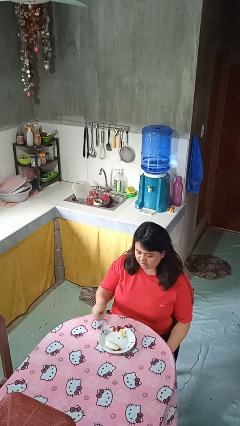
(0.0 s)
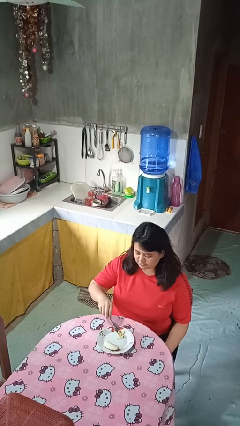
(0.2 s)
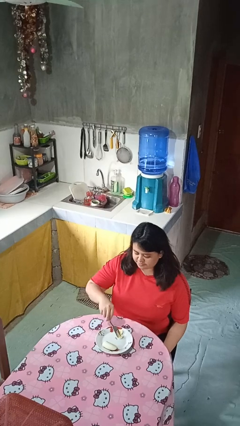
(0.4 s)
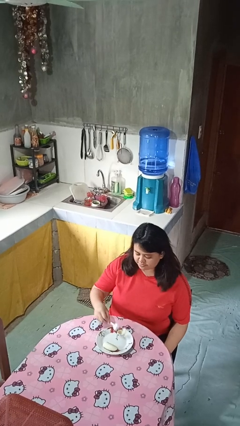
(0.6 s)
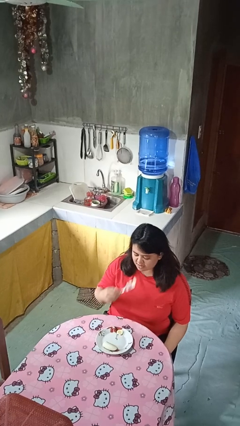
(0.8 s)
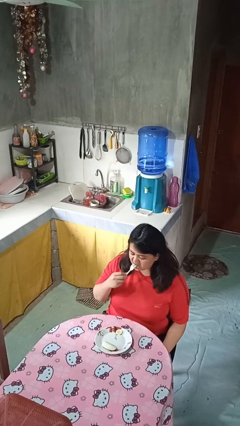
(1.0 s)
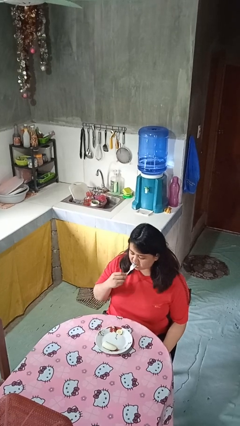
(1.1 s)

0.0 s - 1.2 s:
person eats with utensil

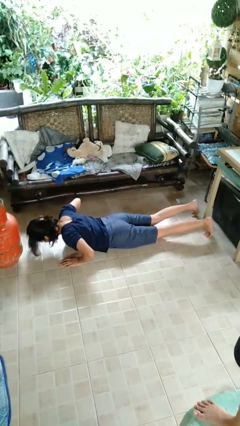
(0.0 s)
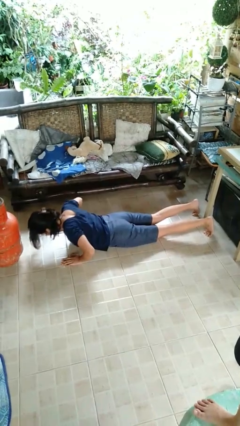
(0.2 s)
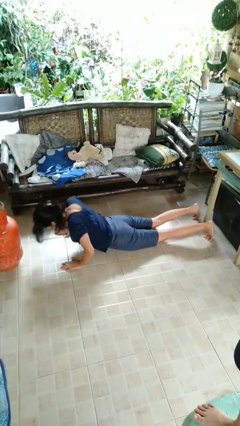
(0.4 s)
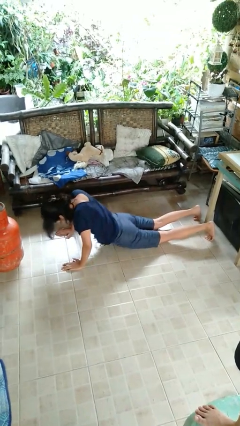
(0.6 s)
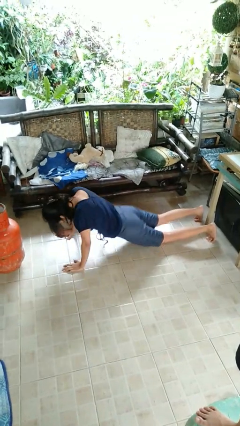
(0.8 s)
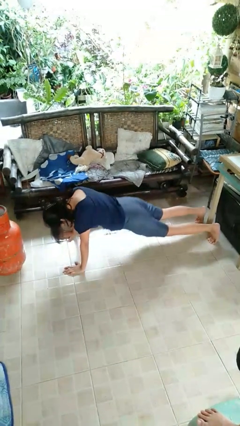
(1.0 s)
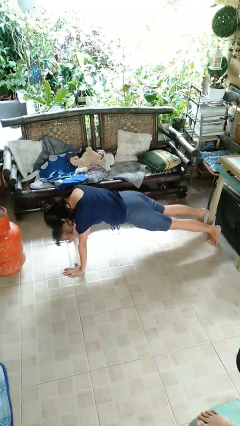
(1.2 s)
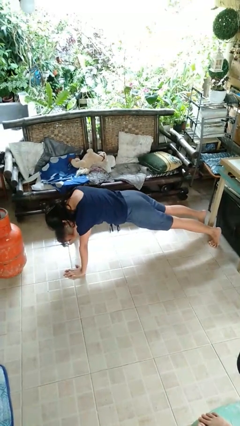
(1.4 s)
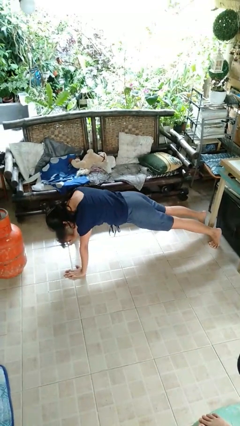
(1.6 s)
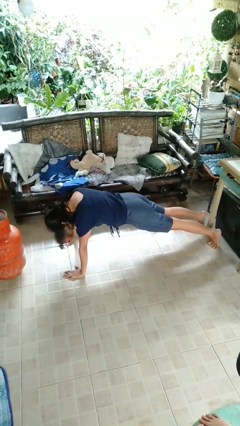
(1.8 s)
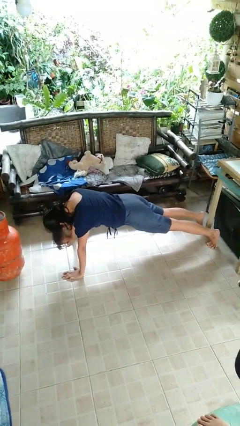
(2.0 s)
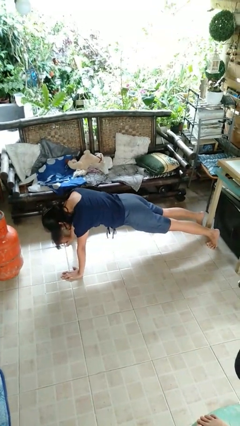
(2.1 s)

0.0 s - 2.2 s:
person exercises with pushup

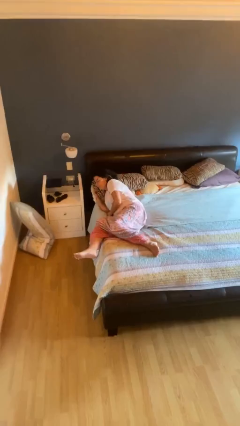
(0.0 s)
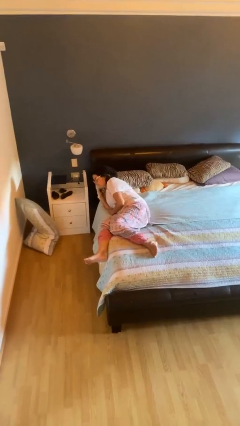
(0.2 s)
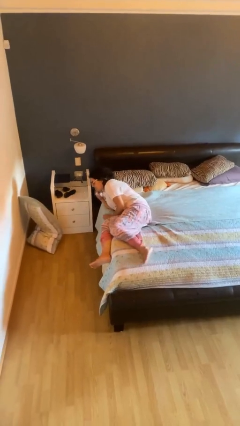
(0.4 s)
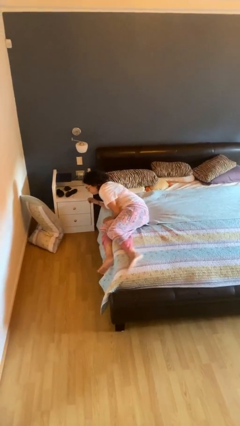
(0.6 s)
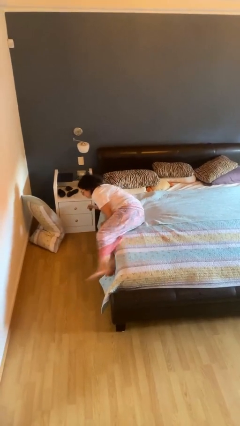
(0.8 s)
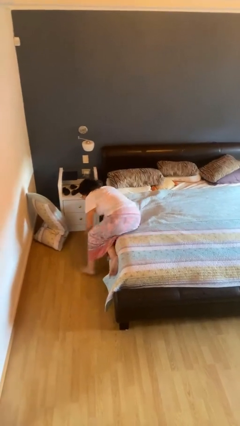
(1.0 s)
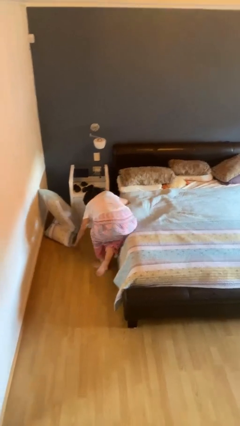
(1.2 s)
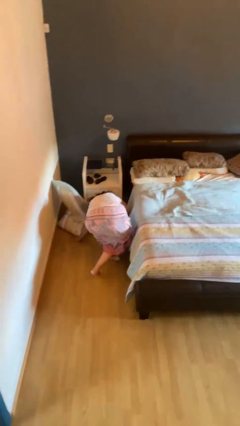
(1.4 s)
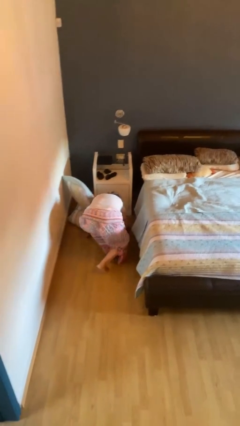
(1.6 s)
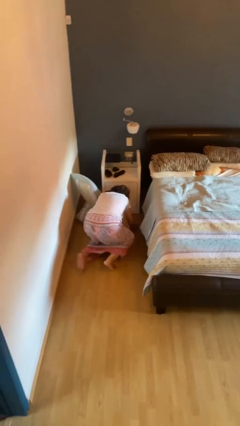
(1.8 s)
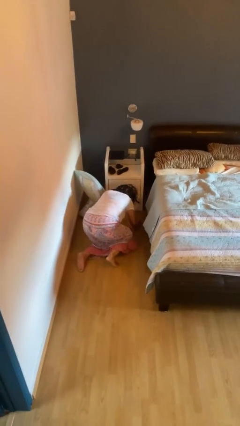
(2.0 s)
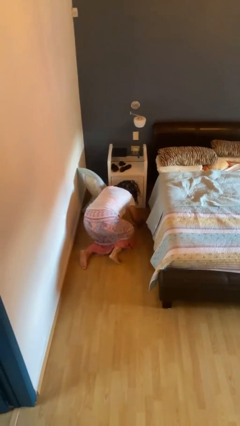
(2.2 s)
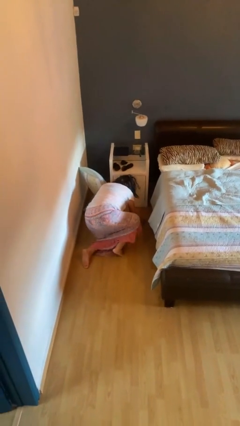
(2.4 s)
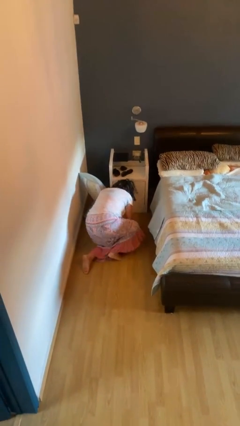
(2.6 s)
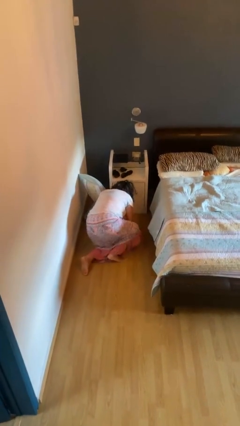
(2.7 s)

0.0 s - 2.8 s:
person falls from bed

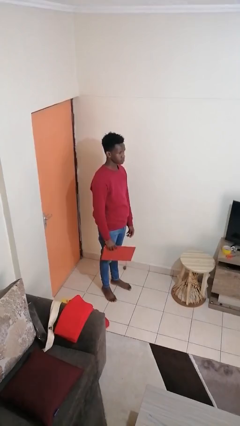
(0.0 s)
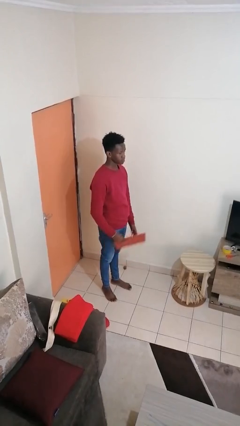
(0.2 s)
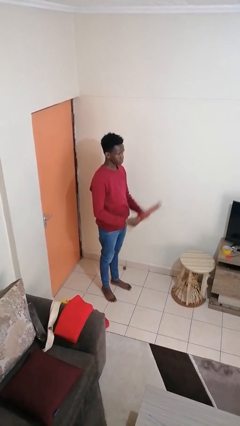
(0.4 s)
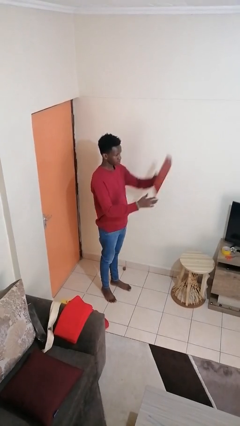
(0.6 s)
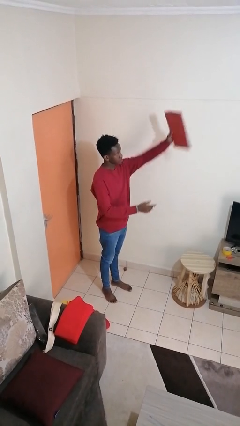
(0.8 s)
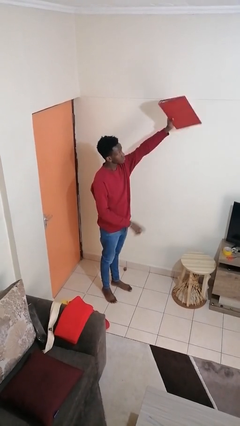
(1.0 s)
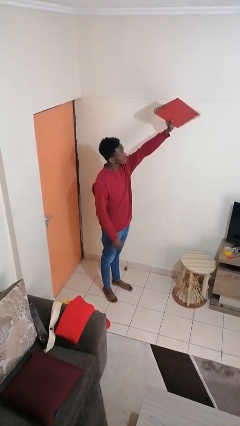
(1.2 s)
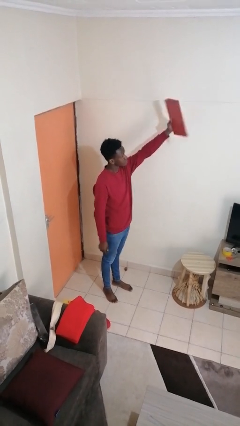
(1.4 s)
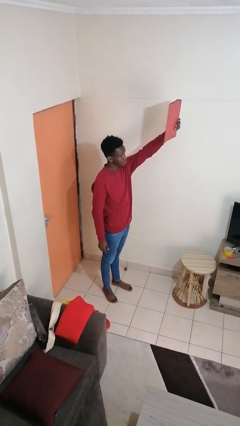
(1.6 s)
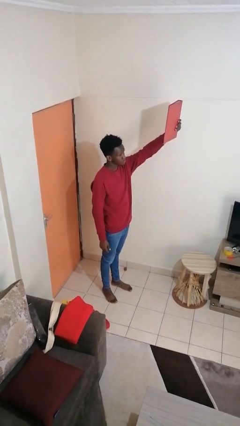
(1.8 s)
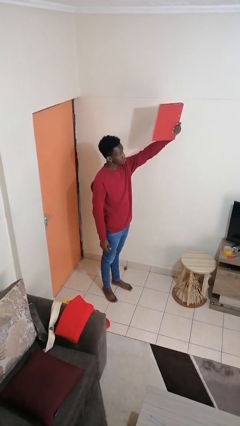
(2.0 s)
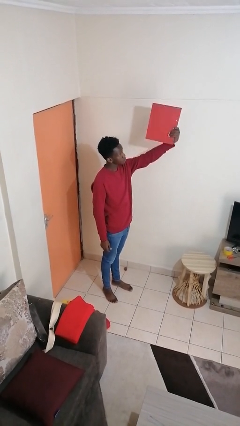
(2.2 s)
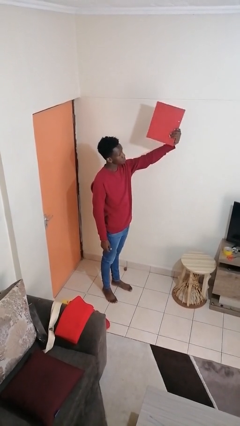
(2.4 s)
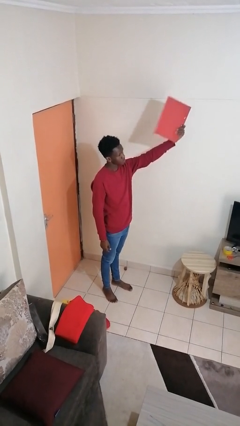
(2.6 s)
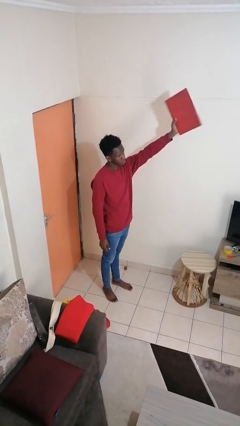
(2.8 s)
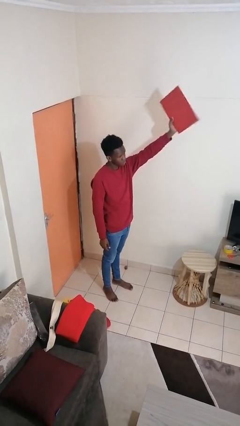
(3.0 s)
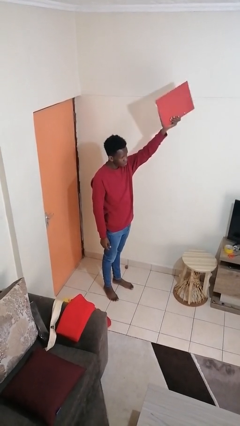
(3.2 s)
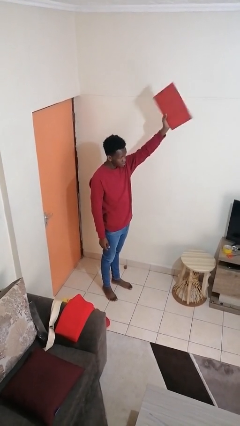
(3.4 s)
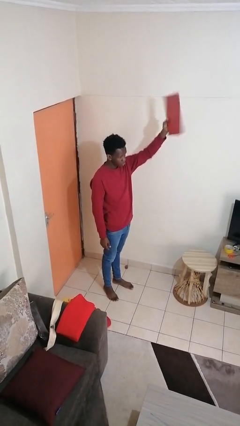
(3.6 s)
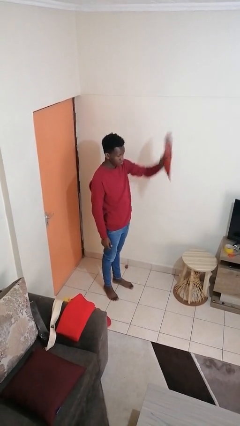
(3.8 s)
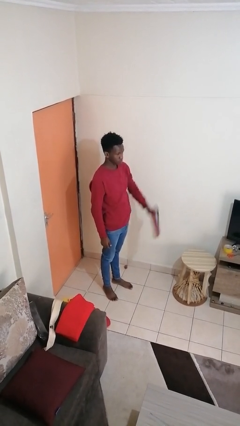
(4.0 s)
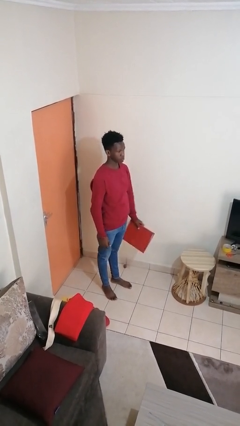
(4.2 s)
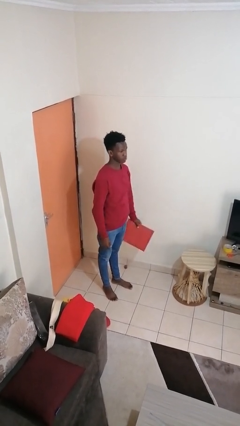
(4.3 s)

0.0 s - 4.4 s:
person holds object above head

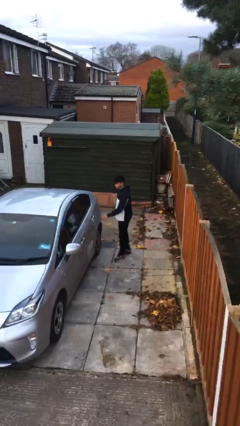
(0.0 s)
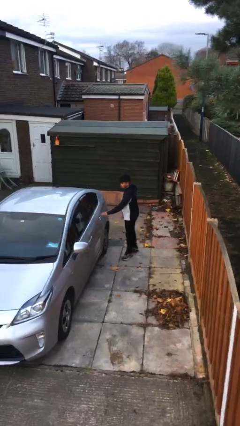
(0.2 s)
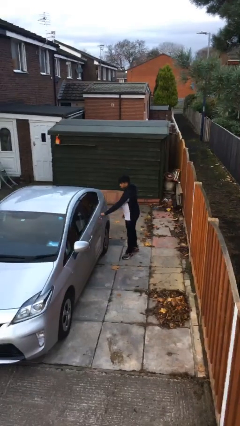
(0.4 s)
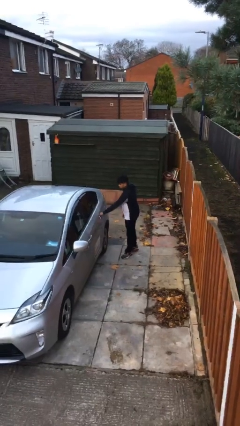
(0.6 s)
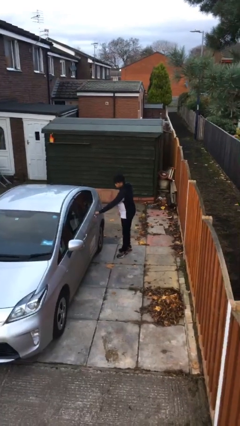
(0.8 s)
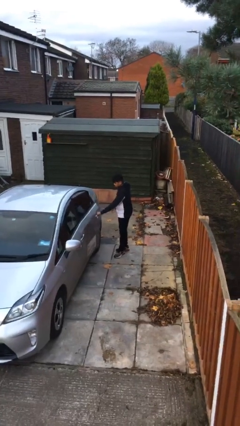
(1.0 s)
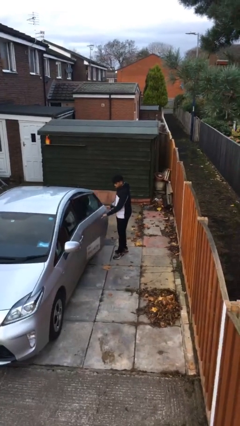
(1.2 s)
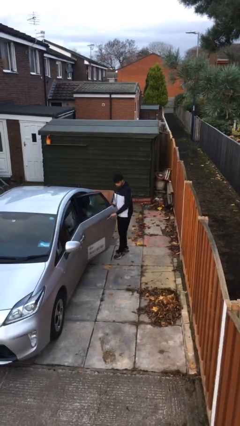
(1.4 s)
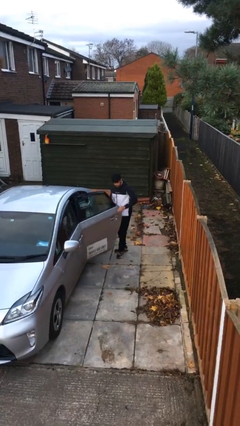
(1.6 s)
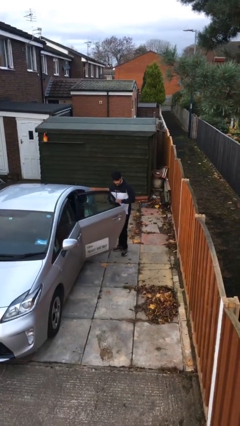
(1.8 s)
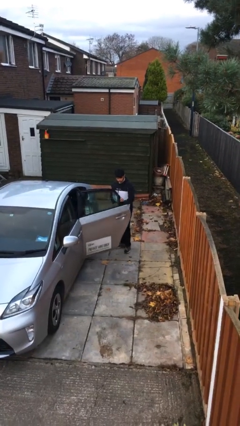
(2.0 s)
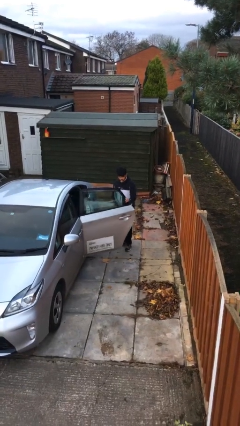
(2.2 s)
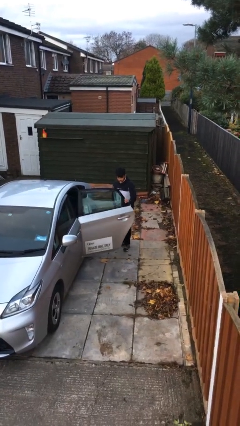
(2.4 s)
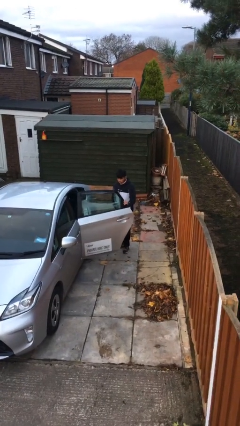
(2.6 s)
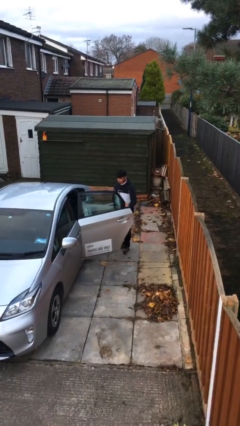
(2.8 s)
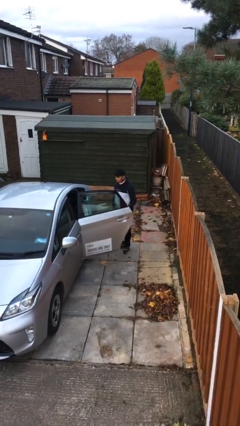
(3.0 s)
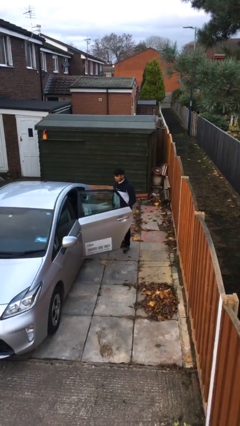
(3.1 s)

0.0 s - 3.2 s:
person opens car door

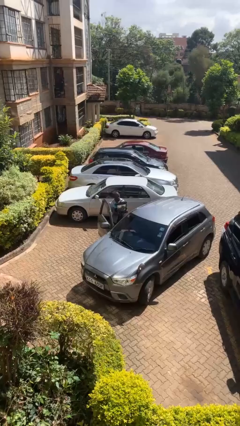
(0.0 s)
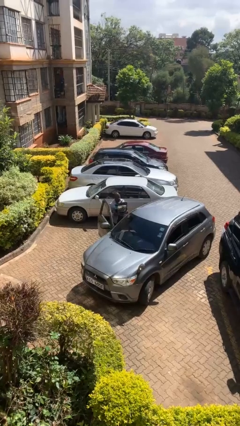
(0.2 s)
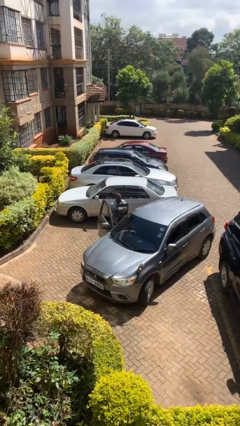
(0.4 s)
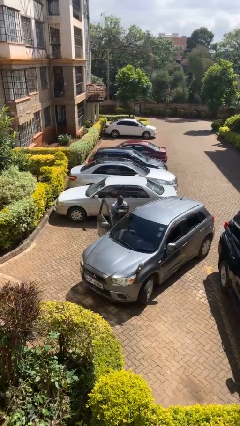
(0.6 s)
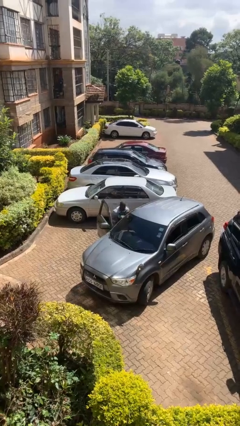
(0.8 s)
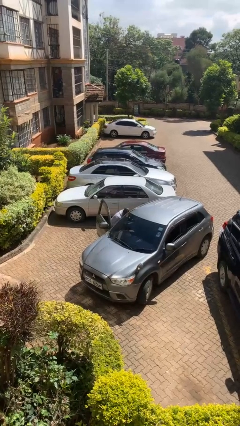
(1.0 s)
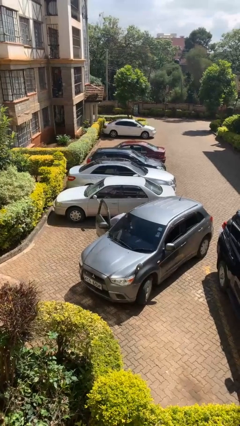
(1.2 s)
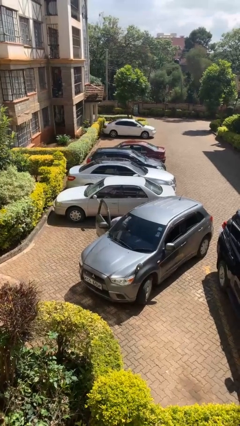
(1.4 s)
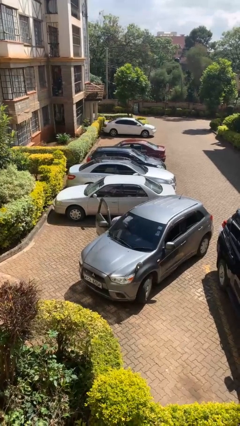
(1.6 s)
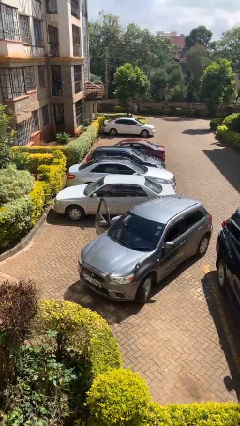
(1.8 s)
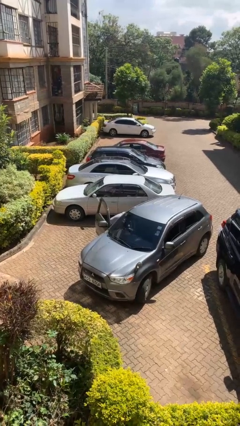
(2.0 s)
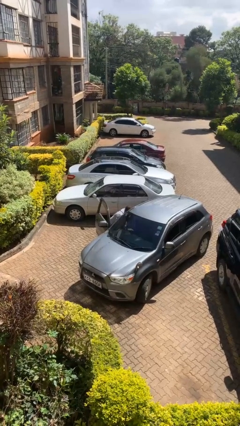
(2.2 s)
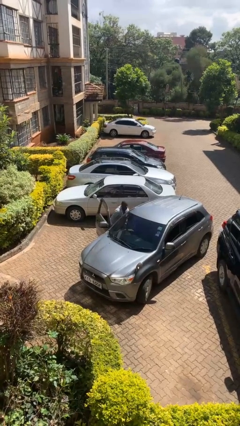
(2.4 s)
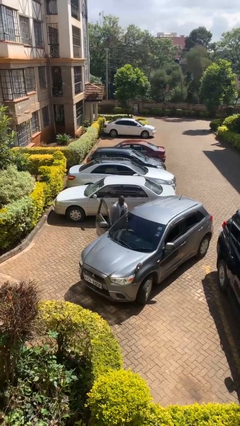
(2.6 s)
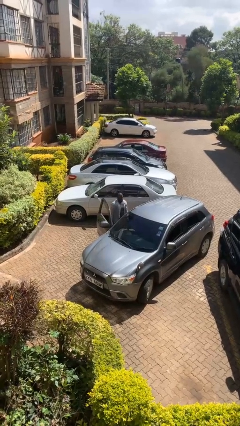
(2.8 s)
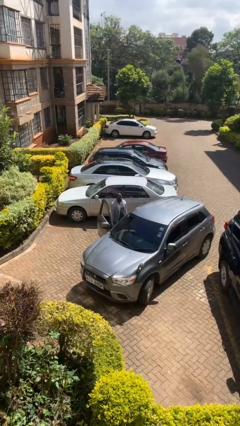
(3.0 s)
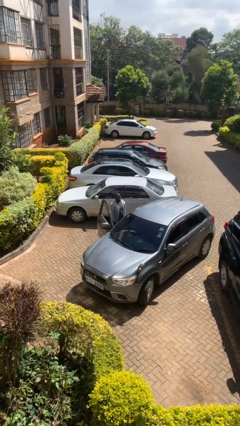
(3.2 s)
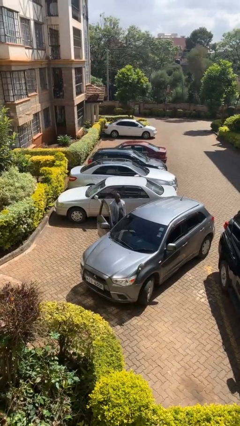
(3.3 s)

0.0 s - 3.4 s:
person loads car
